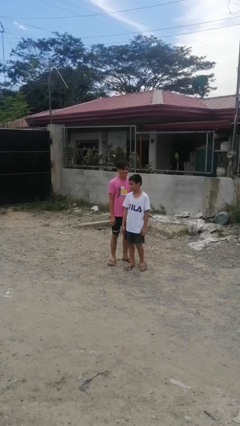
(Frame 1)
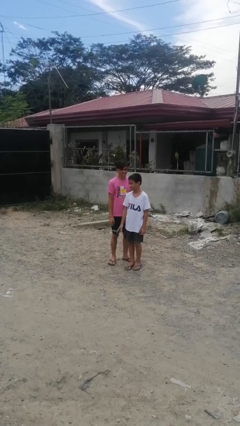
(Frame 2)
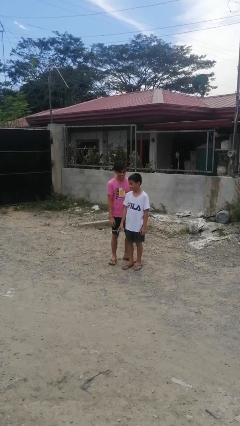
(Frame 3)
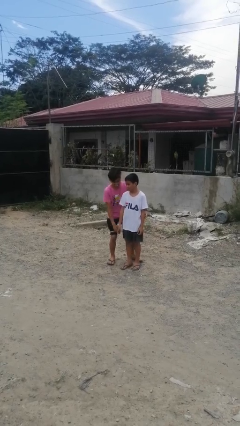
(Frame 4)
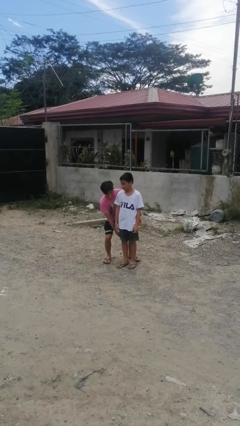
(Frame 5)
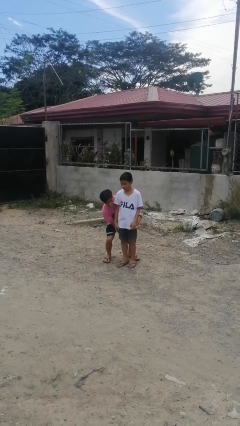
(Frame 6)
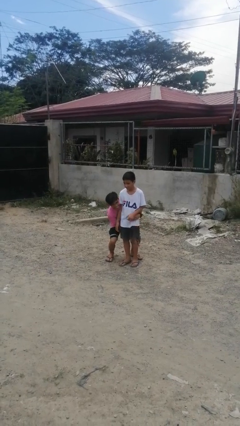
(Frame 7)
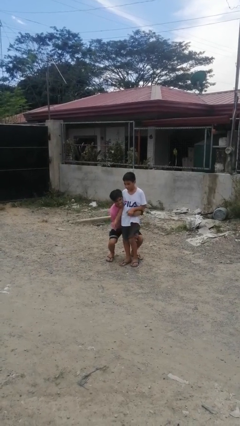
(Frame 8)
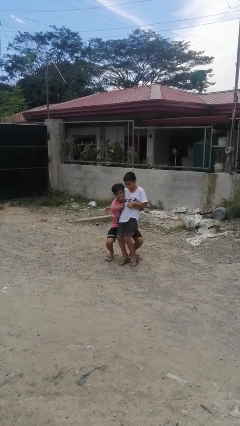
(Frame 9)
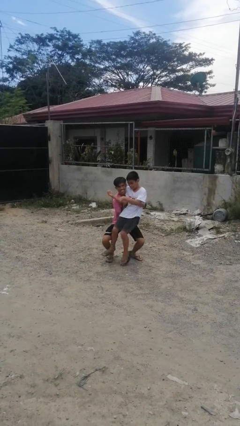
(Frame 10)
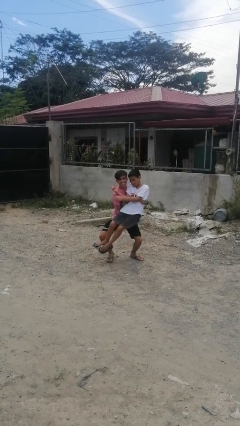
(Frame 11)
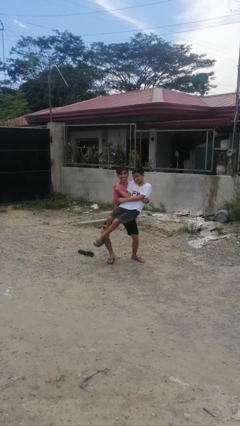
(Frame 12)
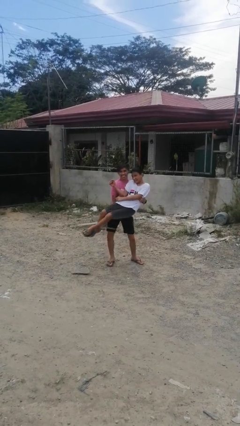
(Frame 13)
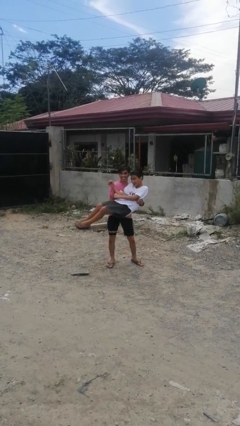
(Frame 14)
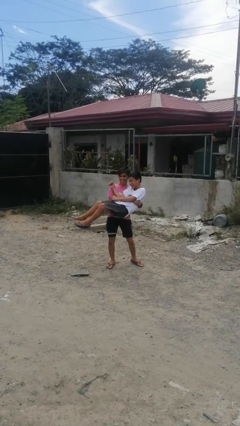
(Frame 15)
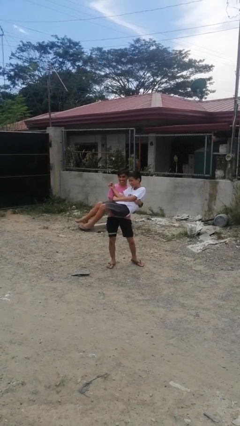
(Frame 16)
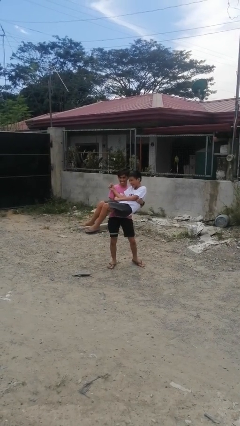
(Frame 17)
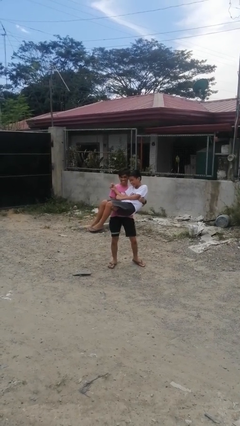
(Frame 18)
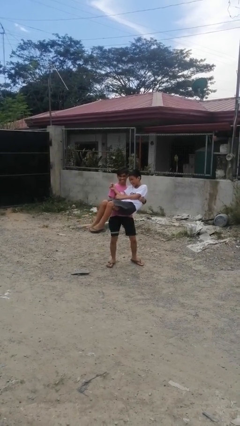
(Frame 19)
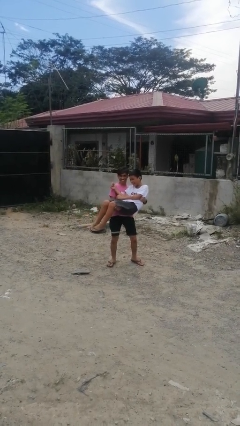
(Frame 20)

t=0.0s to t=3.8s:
person picks up person

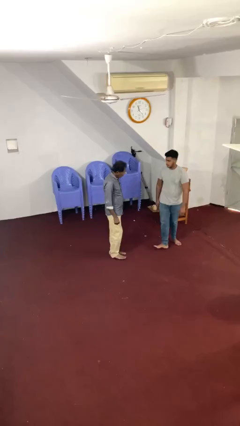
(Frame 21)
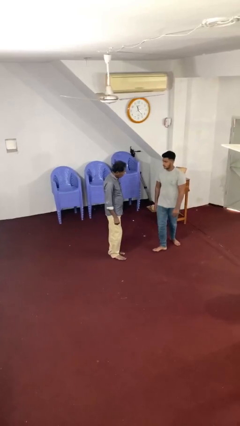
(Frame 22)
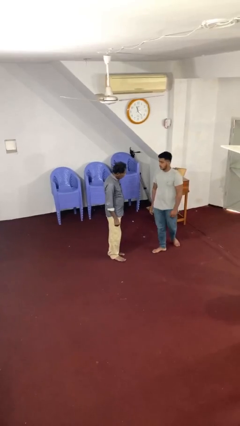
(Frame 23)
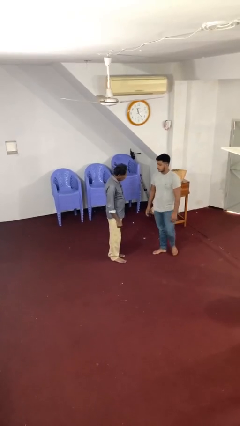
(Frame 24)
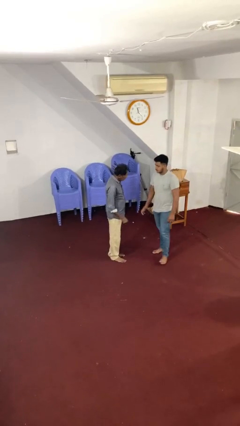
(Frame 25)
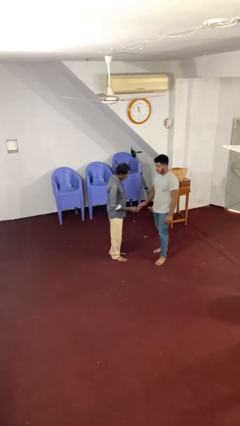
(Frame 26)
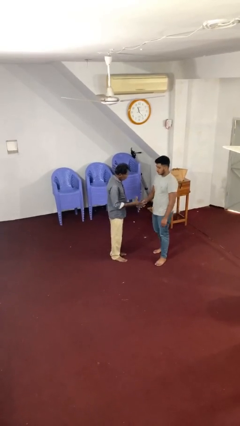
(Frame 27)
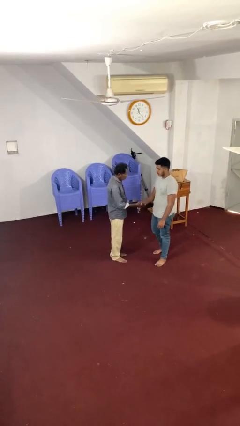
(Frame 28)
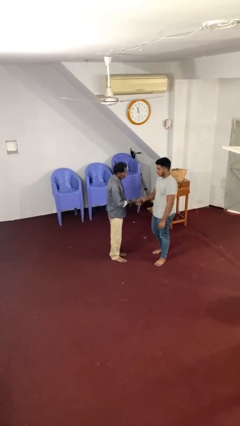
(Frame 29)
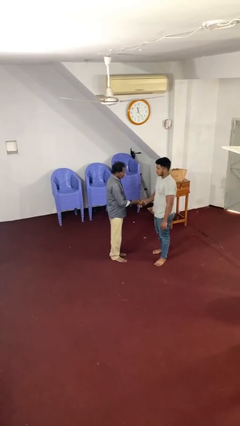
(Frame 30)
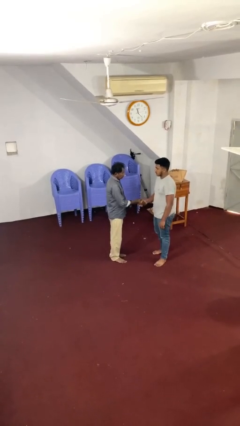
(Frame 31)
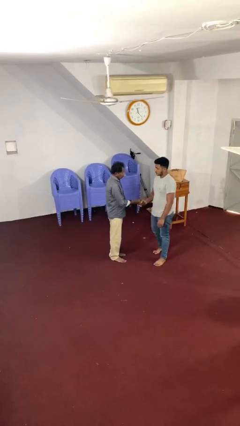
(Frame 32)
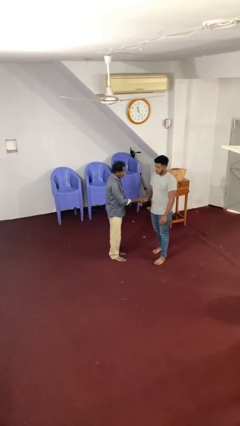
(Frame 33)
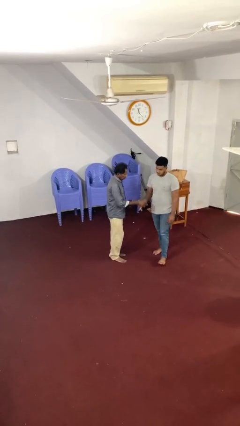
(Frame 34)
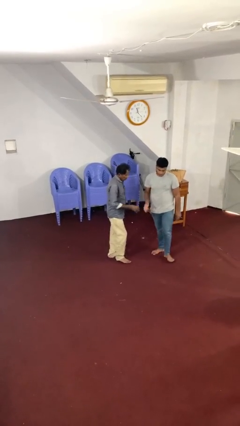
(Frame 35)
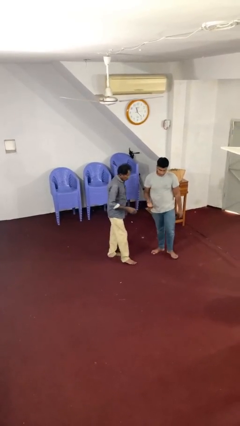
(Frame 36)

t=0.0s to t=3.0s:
person shakes hand

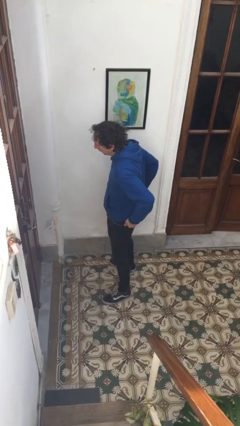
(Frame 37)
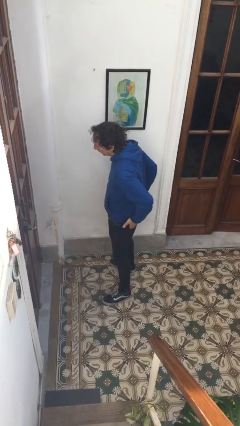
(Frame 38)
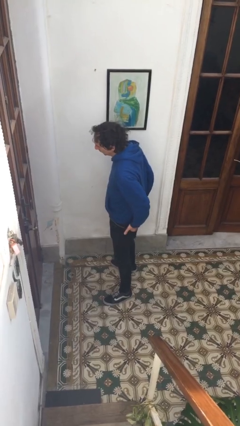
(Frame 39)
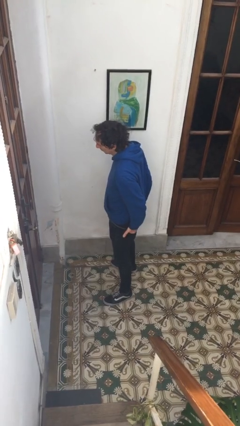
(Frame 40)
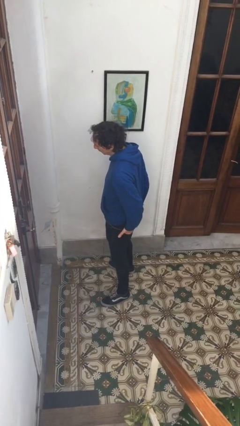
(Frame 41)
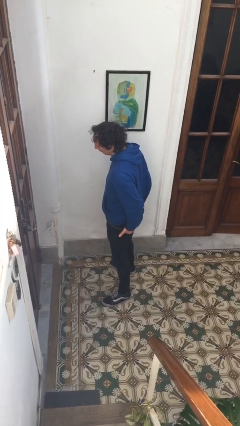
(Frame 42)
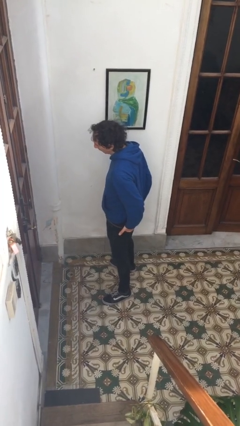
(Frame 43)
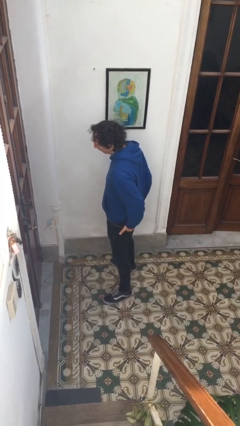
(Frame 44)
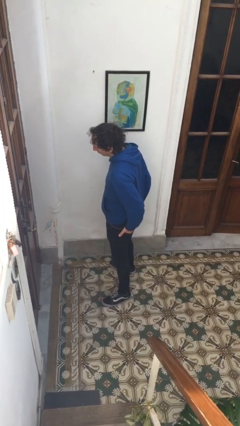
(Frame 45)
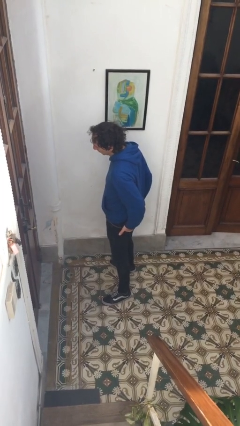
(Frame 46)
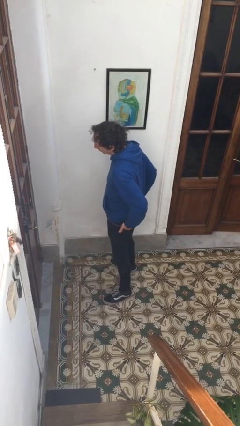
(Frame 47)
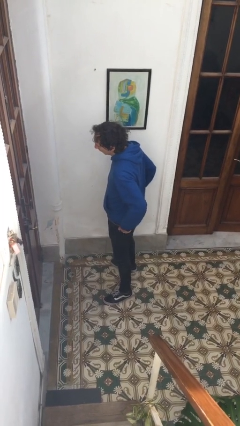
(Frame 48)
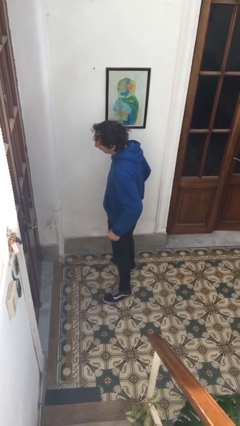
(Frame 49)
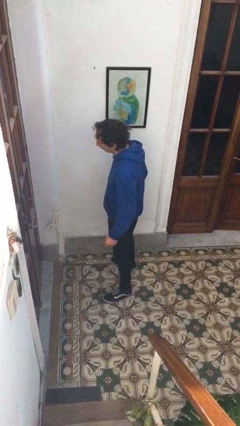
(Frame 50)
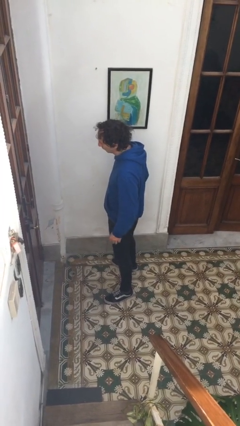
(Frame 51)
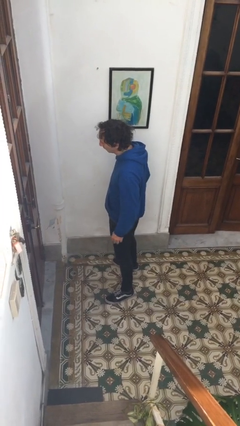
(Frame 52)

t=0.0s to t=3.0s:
person puts hands in back pockets

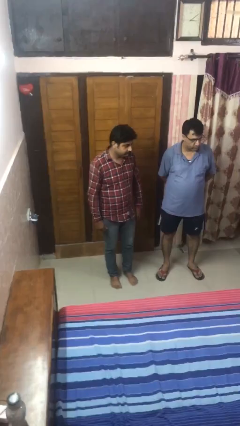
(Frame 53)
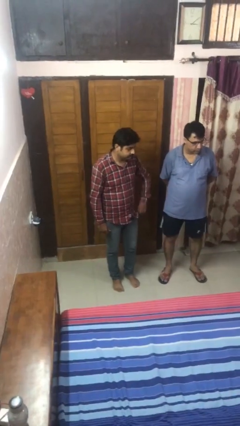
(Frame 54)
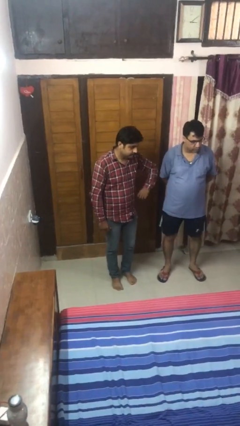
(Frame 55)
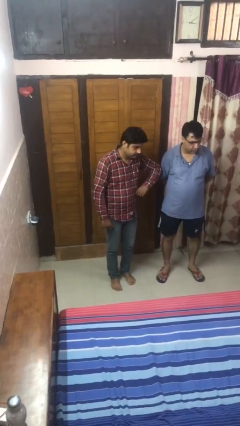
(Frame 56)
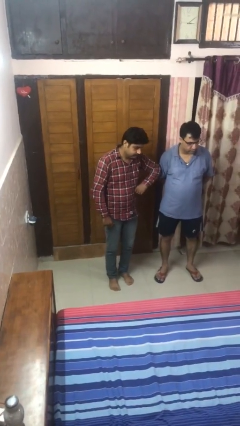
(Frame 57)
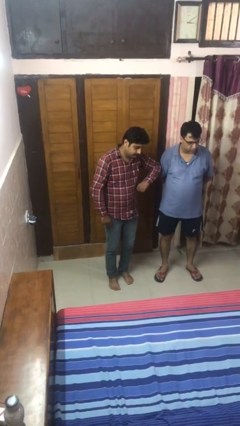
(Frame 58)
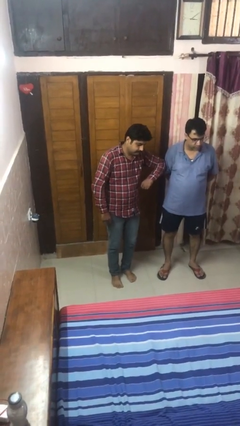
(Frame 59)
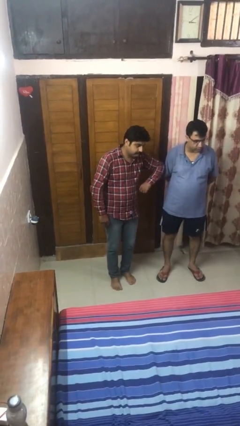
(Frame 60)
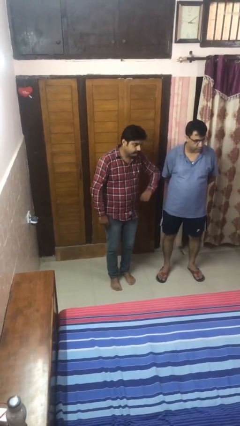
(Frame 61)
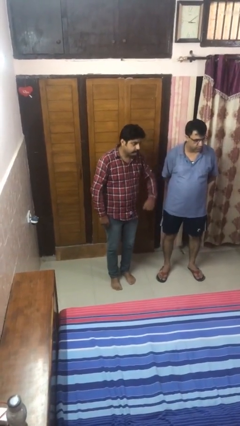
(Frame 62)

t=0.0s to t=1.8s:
person nudges person with elbow

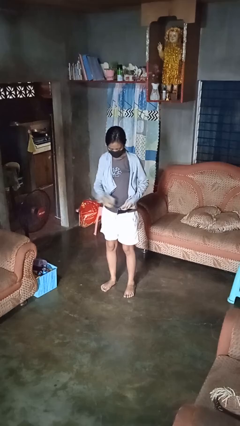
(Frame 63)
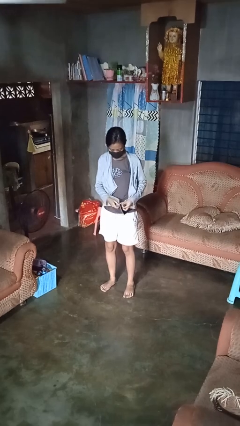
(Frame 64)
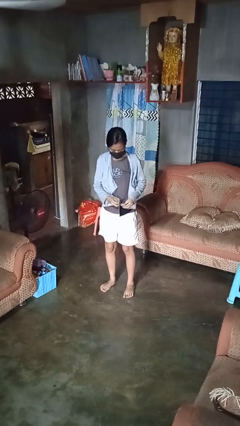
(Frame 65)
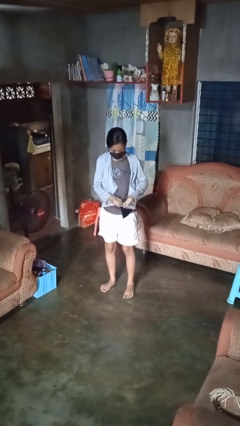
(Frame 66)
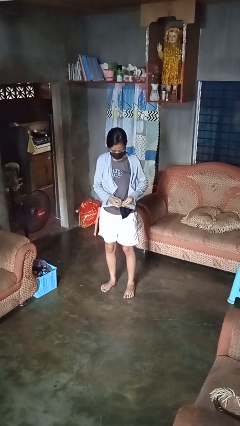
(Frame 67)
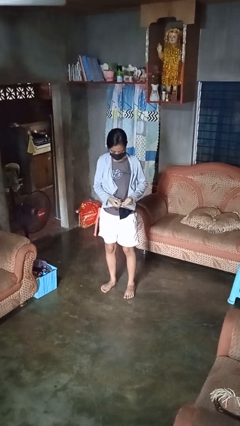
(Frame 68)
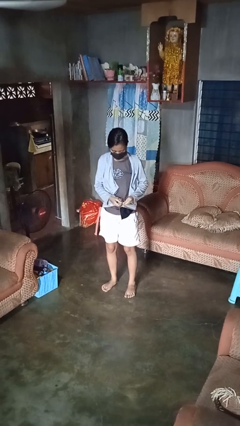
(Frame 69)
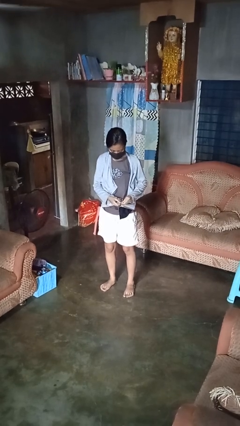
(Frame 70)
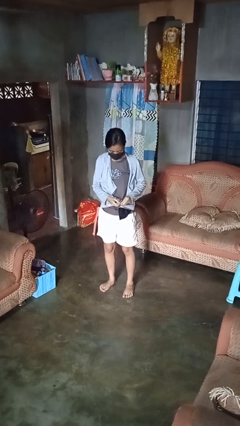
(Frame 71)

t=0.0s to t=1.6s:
person zips up jacket

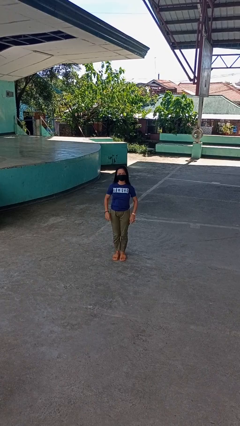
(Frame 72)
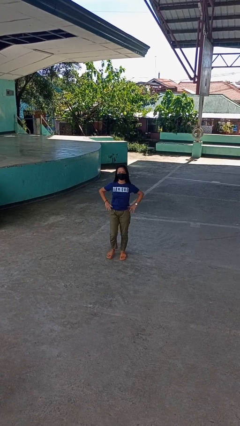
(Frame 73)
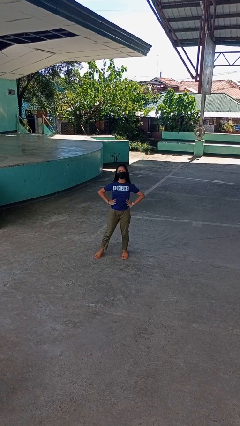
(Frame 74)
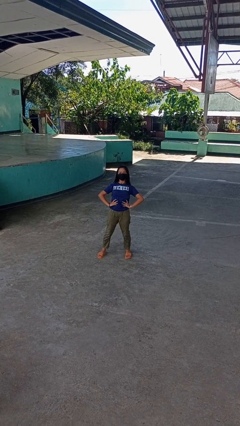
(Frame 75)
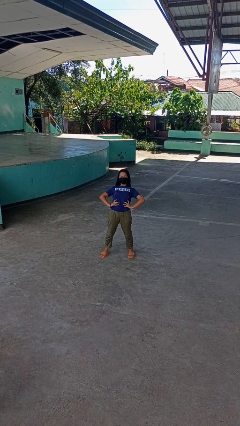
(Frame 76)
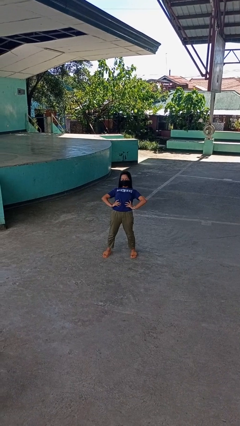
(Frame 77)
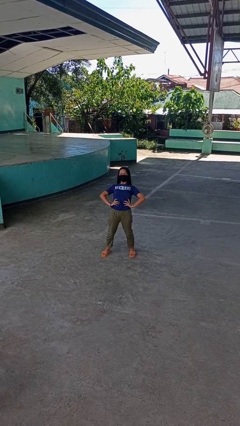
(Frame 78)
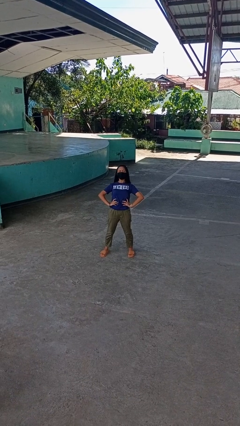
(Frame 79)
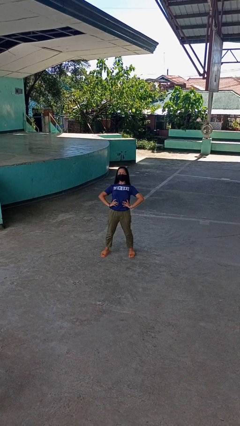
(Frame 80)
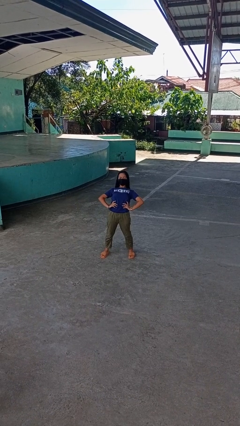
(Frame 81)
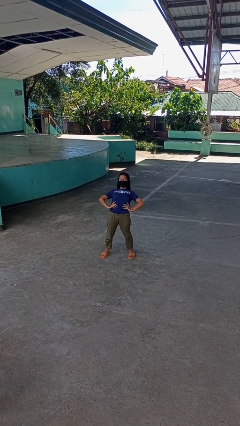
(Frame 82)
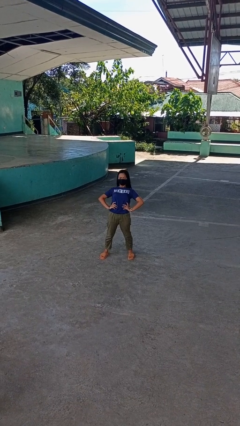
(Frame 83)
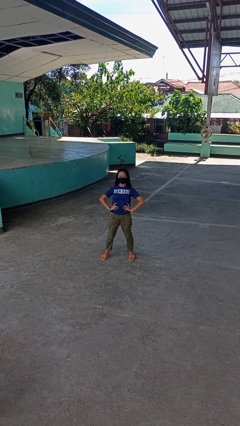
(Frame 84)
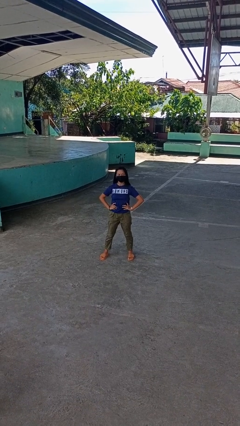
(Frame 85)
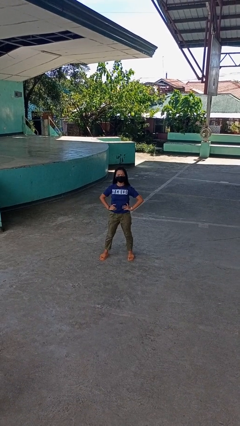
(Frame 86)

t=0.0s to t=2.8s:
person stretches back

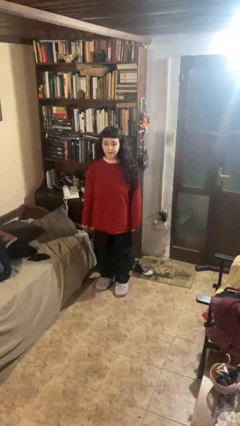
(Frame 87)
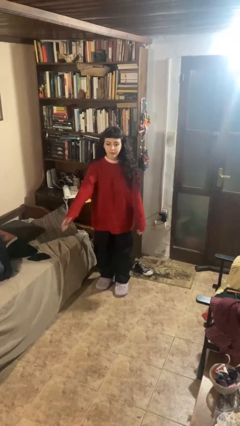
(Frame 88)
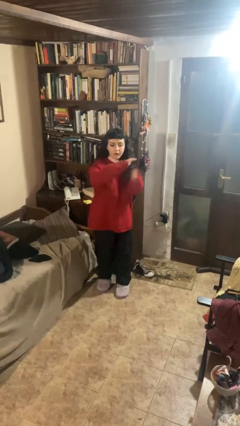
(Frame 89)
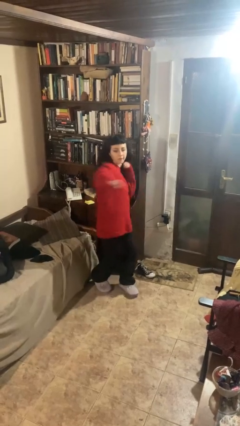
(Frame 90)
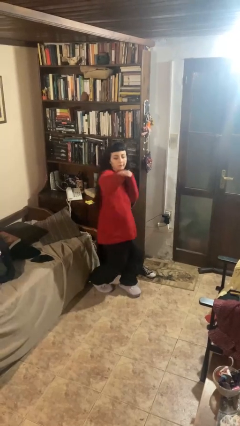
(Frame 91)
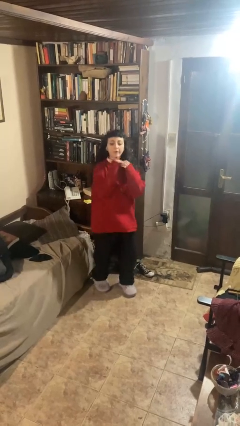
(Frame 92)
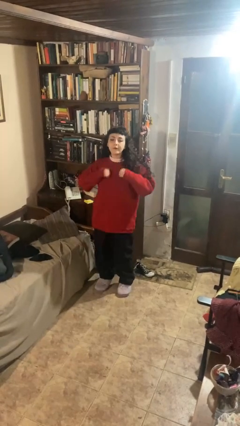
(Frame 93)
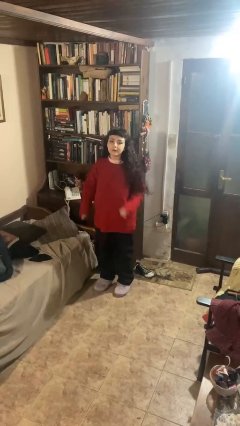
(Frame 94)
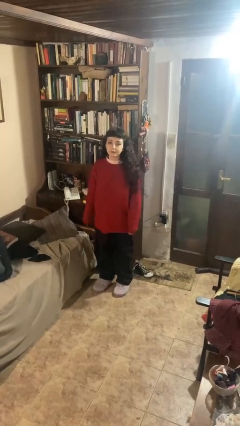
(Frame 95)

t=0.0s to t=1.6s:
person karate chop
